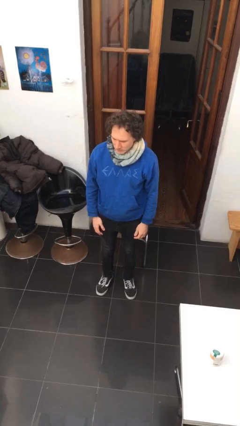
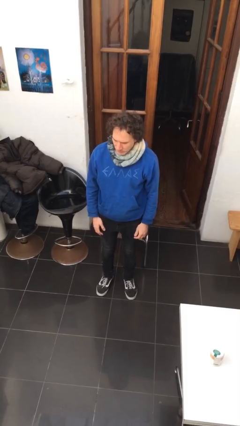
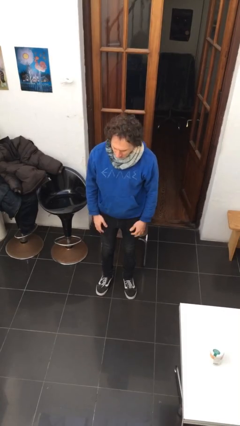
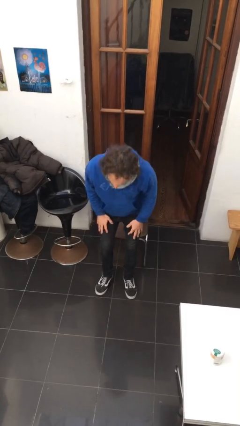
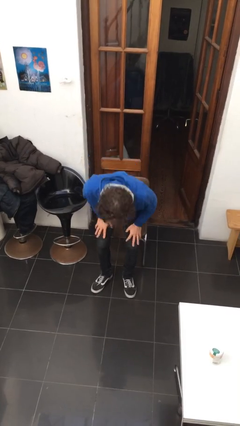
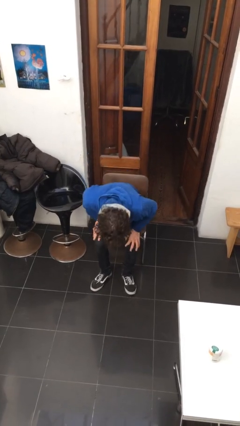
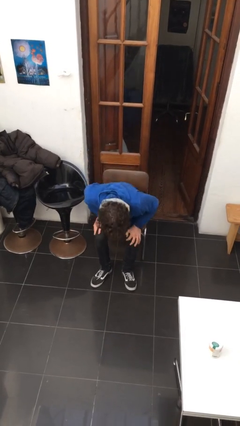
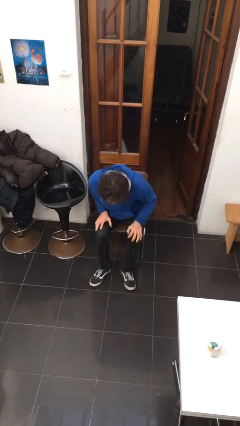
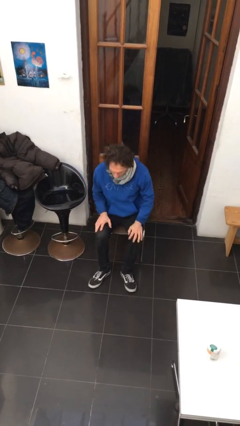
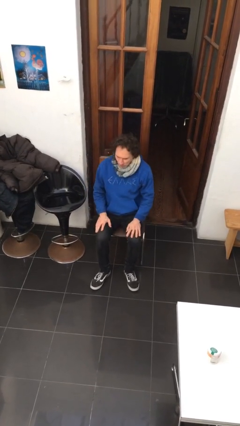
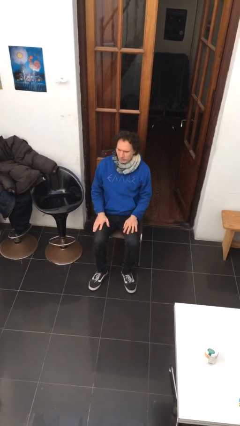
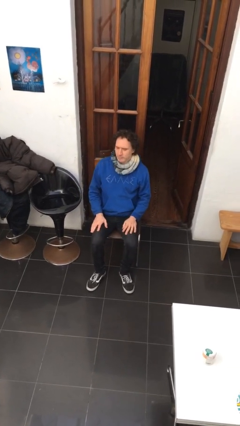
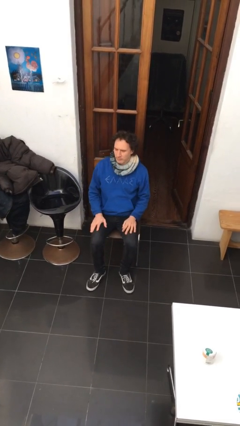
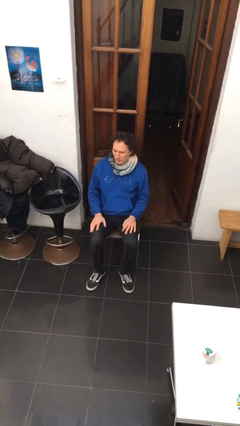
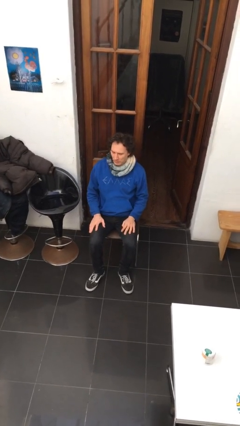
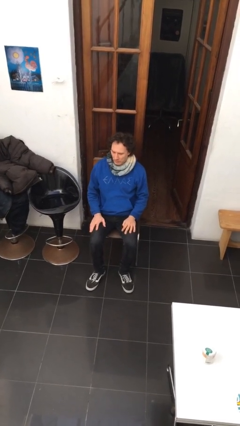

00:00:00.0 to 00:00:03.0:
person sits down

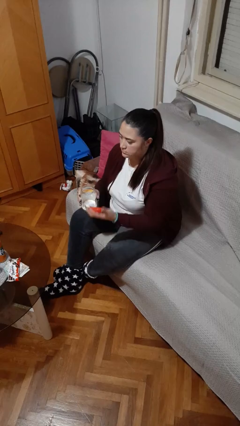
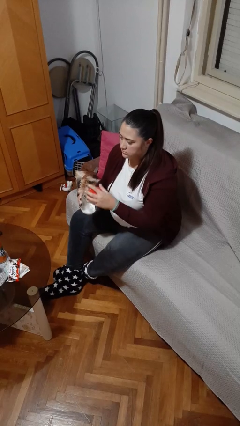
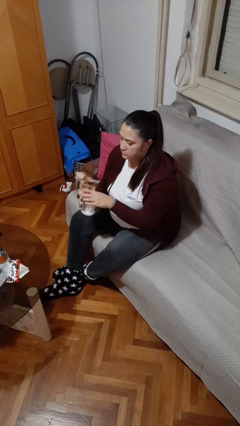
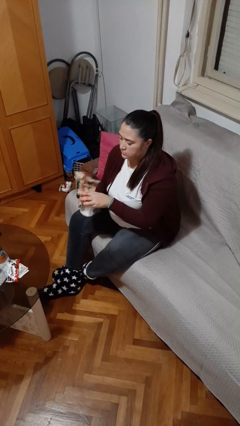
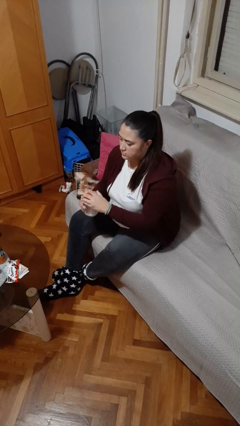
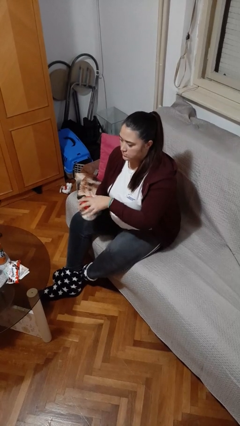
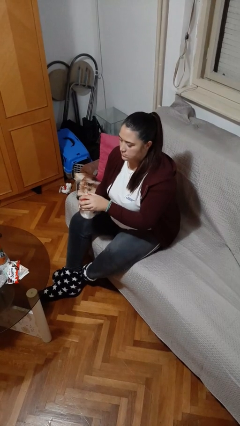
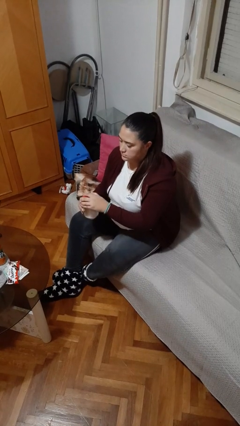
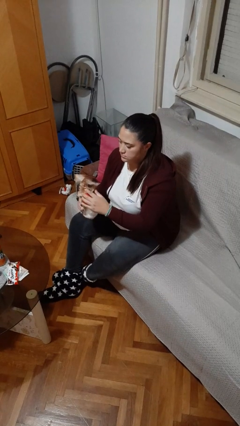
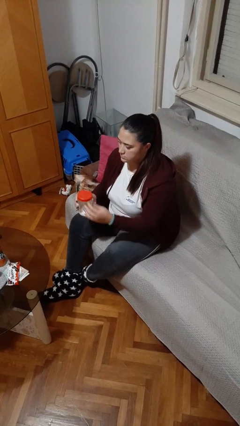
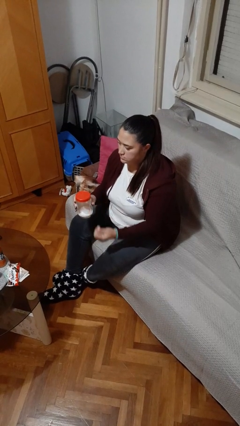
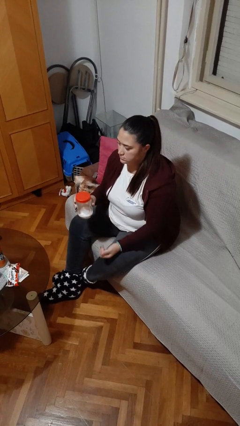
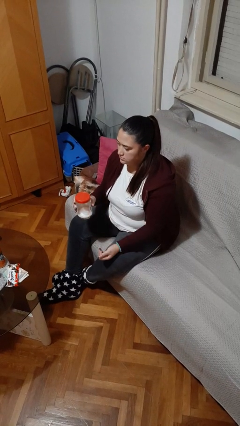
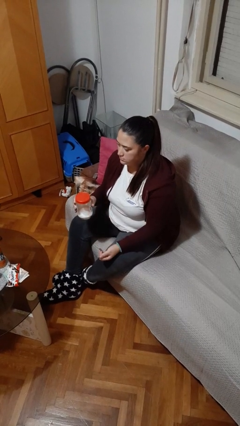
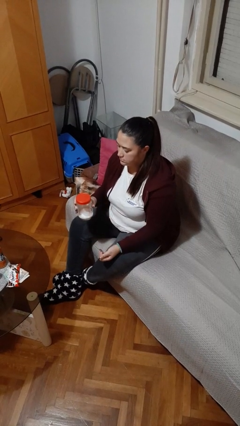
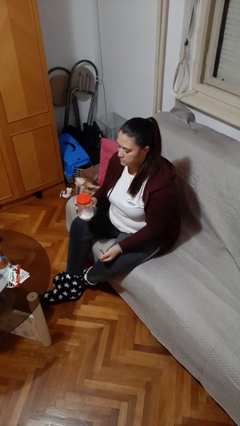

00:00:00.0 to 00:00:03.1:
person closes jar

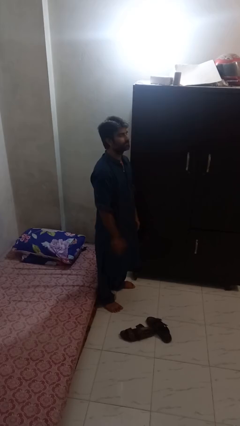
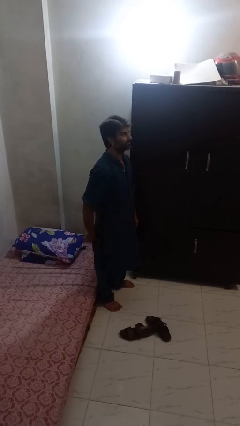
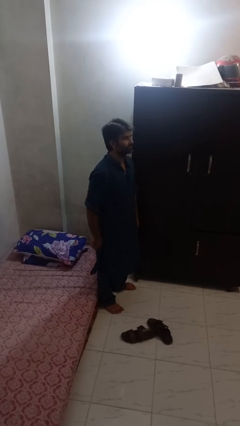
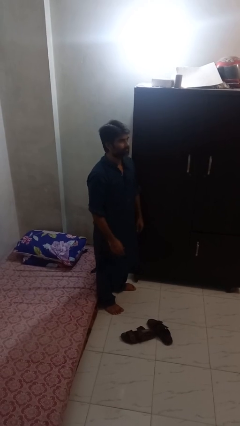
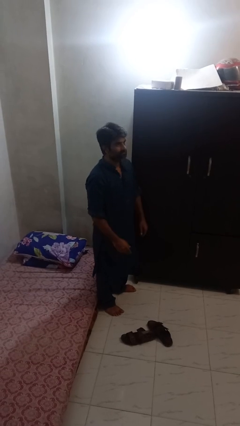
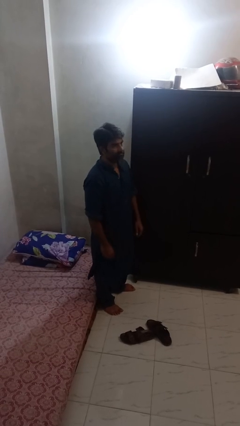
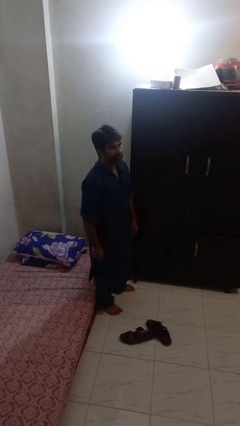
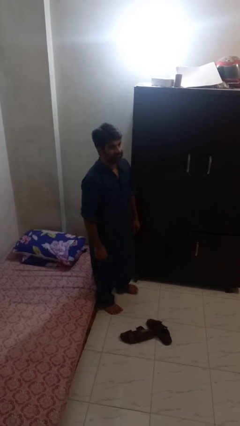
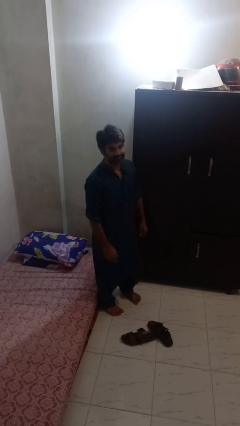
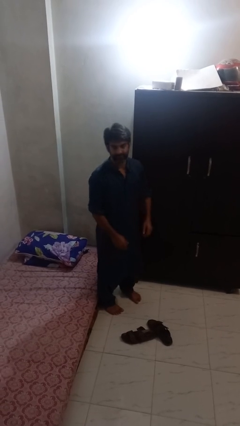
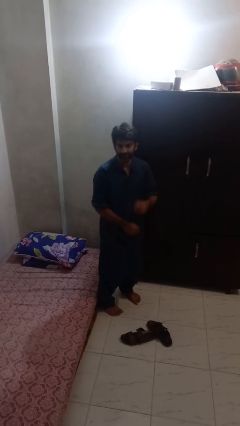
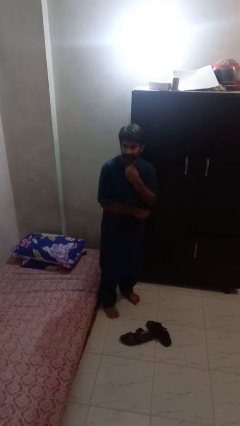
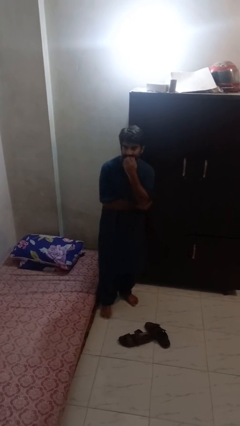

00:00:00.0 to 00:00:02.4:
person gestures lower hand

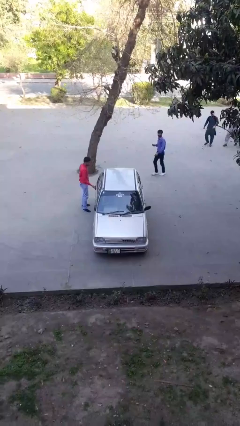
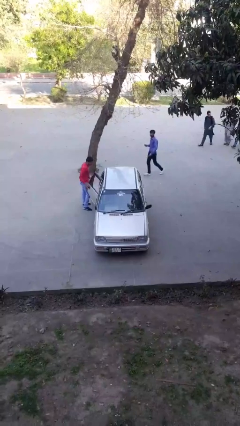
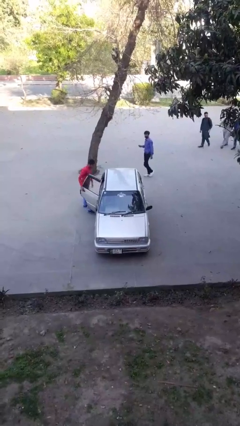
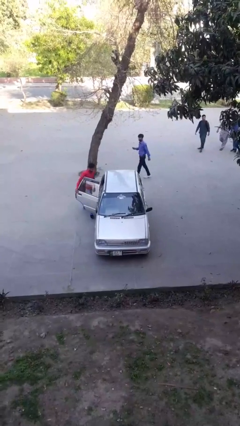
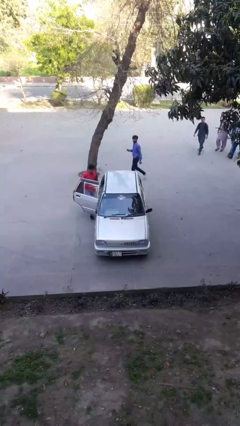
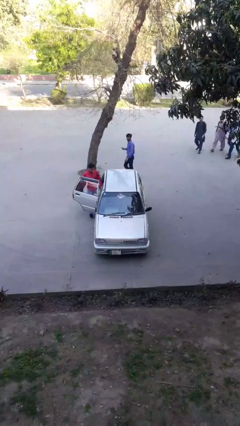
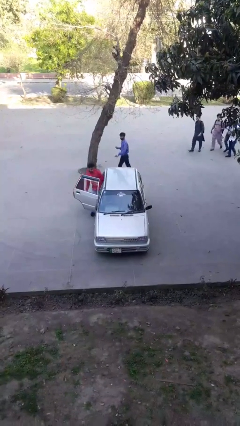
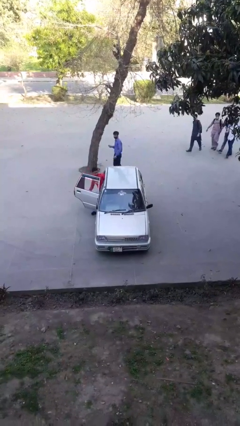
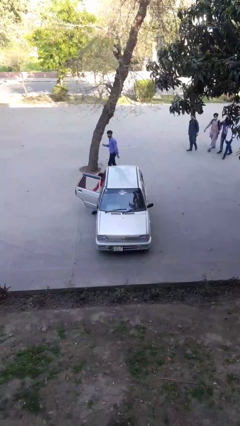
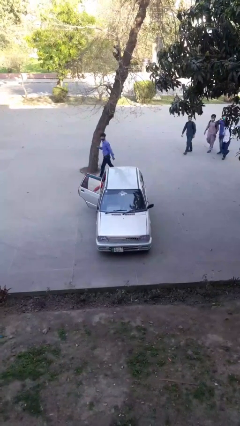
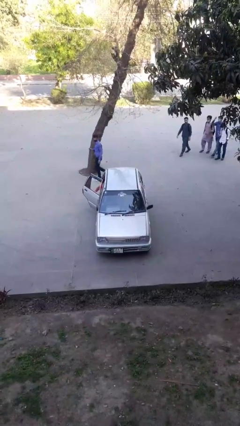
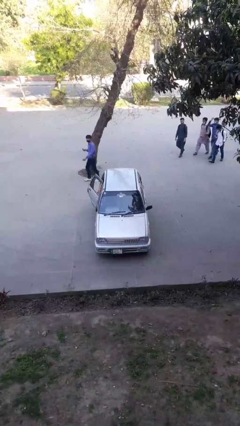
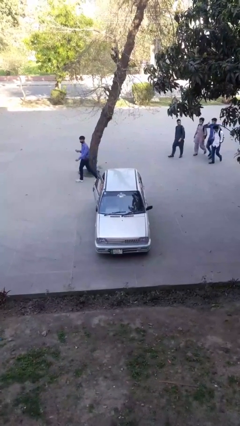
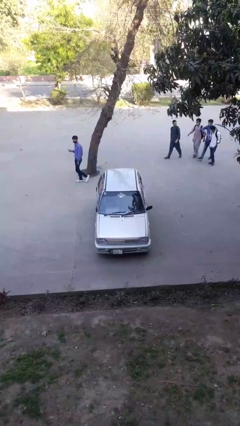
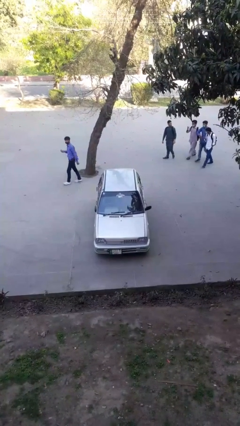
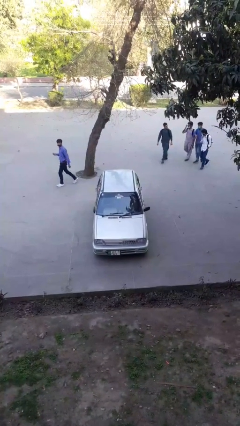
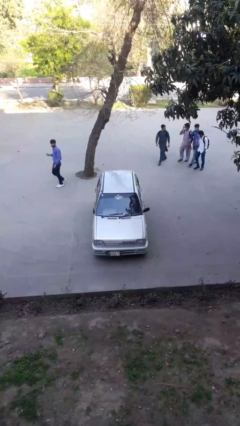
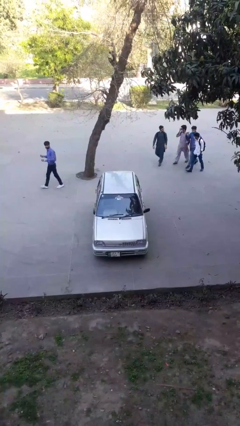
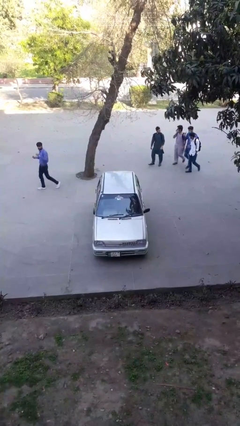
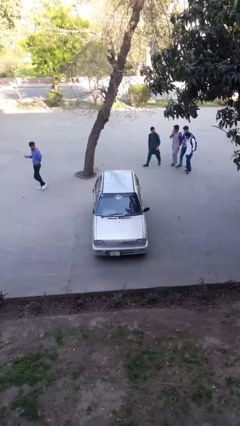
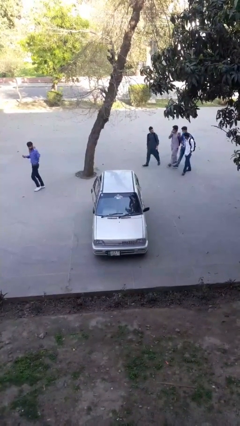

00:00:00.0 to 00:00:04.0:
car picks up person

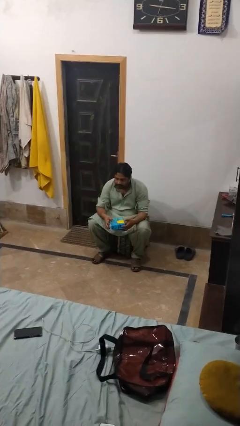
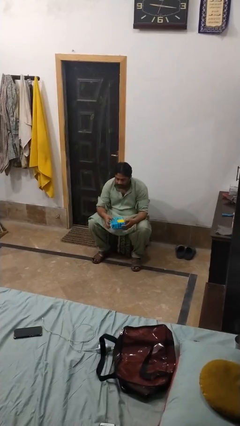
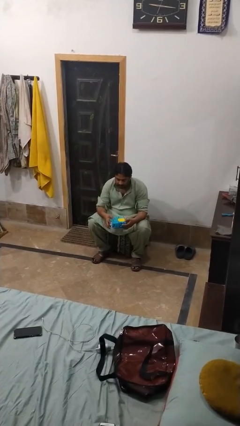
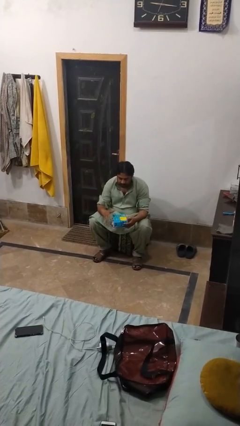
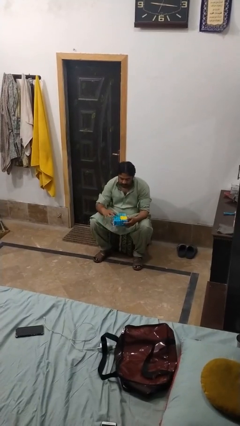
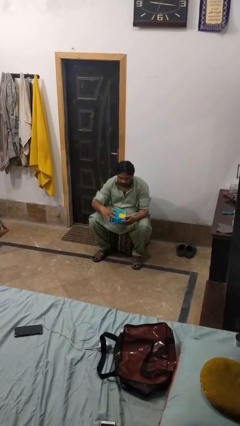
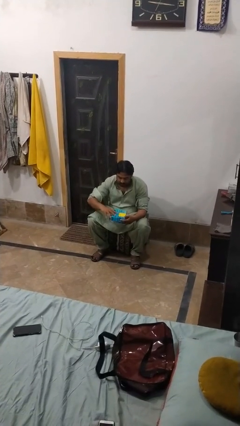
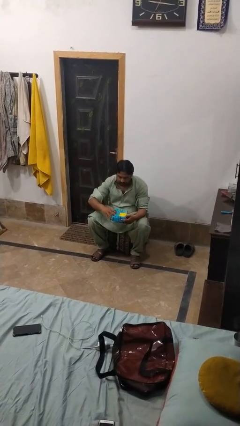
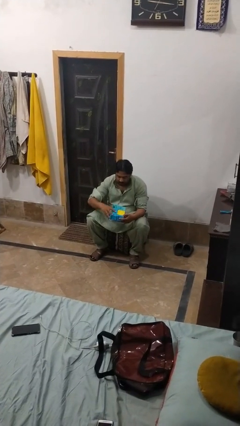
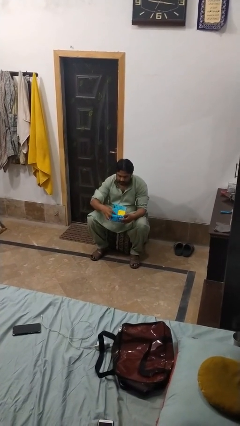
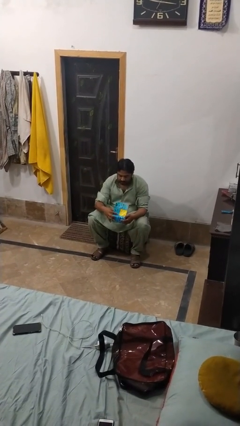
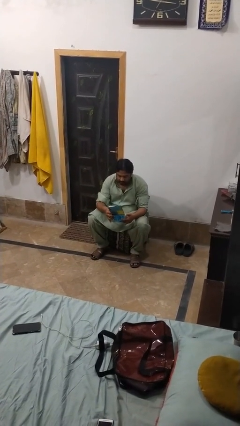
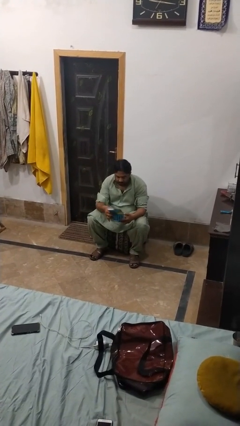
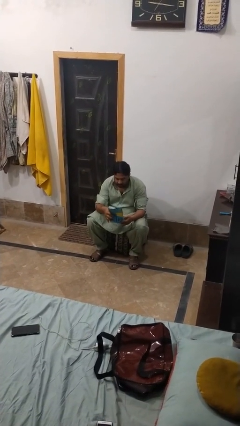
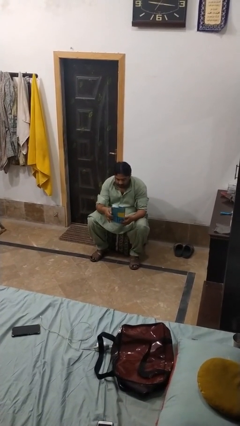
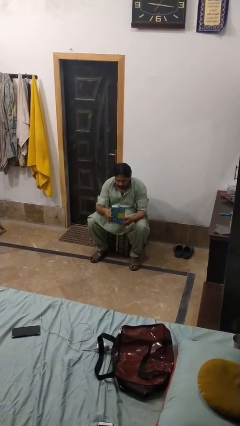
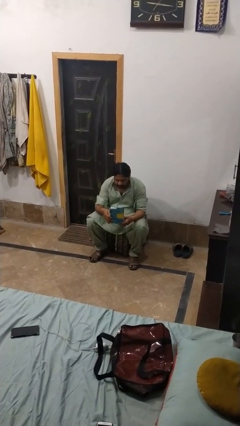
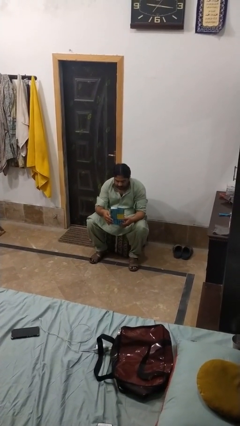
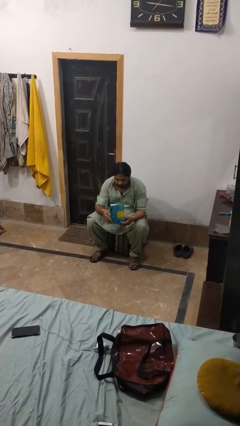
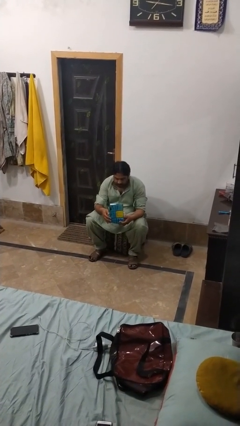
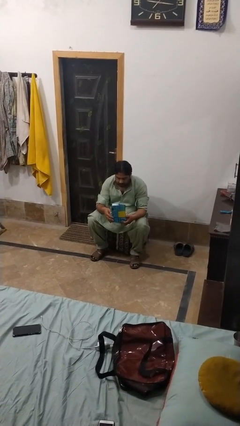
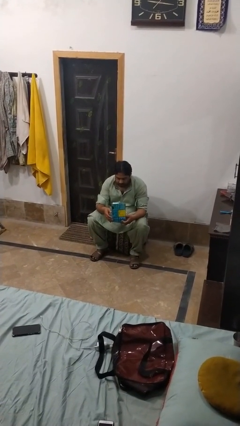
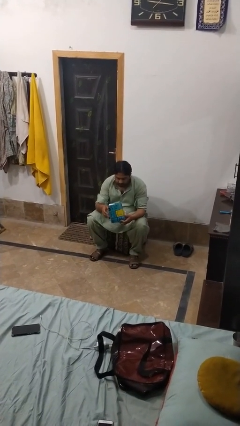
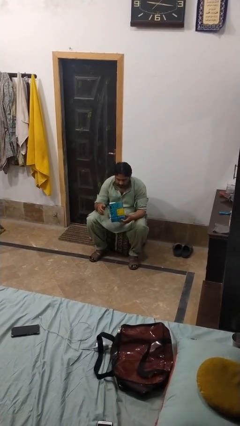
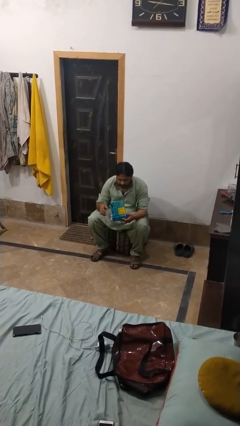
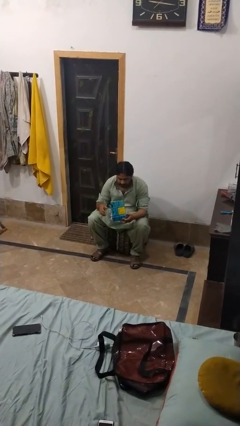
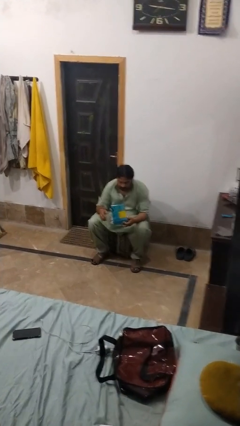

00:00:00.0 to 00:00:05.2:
person opens jewelry box
